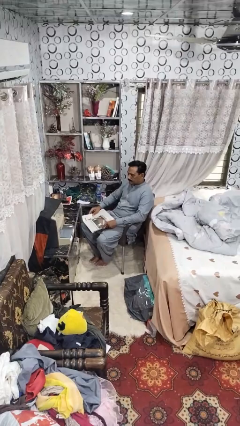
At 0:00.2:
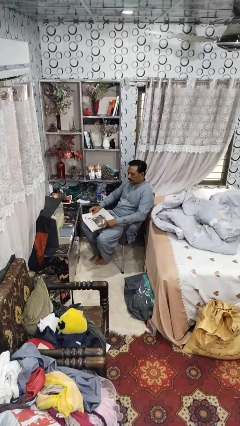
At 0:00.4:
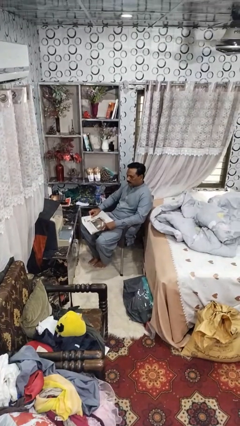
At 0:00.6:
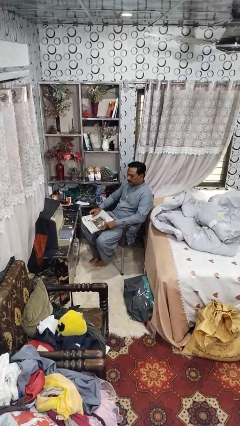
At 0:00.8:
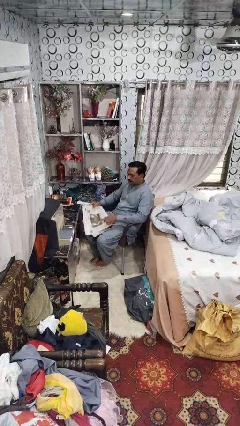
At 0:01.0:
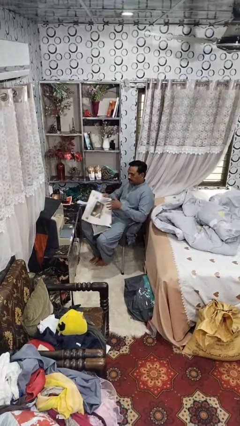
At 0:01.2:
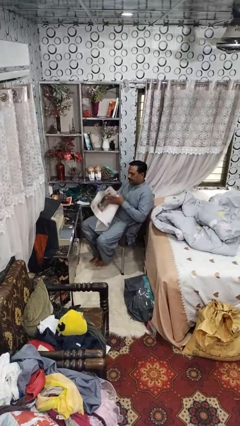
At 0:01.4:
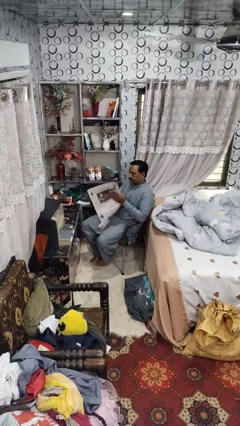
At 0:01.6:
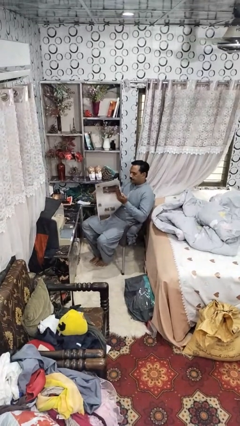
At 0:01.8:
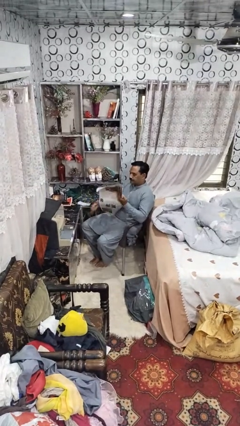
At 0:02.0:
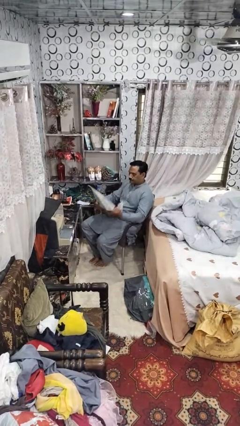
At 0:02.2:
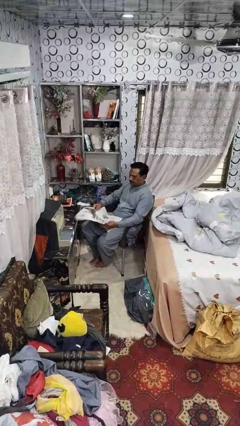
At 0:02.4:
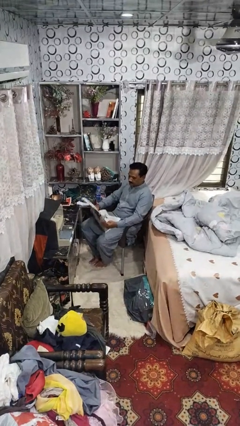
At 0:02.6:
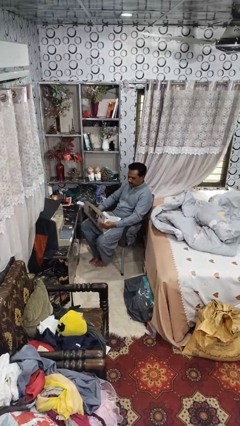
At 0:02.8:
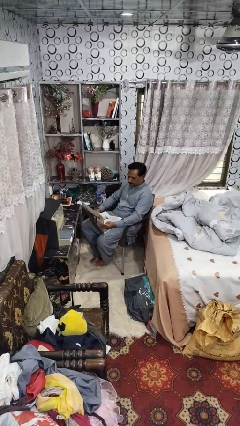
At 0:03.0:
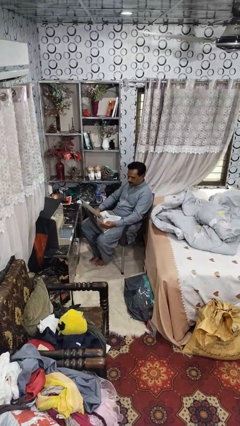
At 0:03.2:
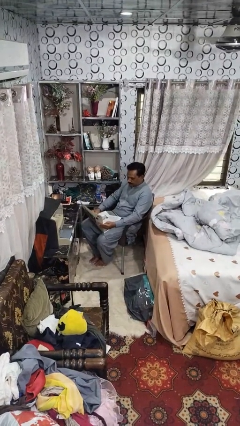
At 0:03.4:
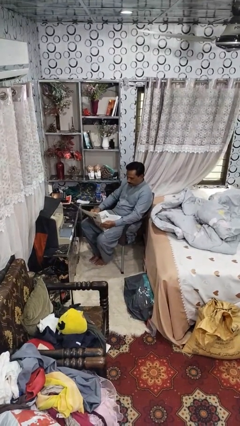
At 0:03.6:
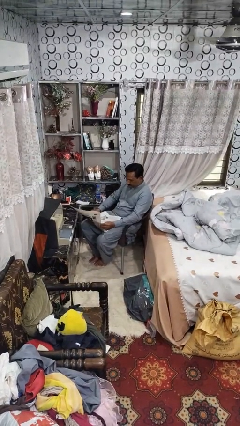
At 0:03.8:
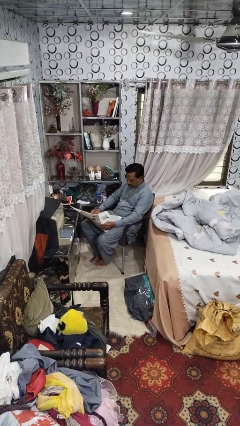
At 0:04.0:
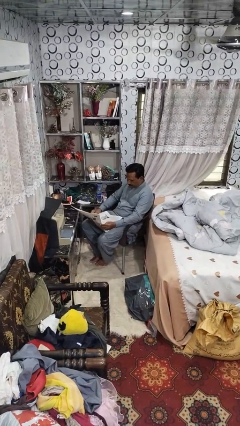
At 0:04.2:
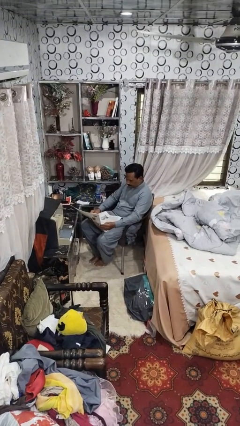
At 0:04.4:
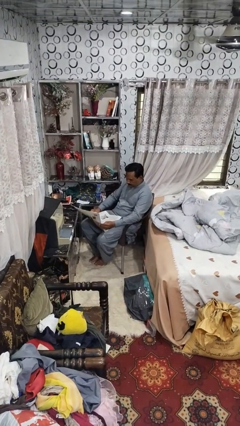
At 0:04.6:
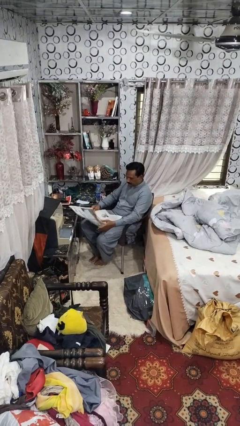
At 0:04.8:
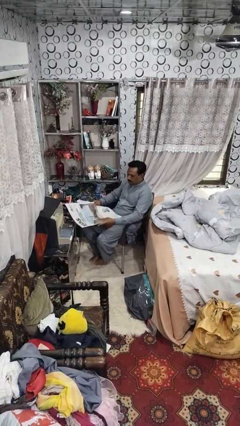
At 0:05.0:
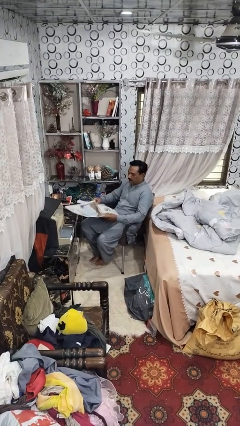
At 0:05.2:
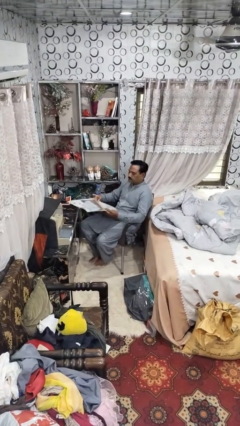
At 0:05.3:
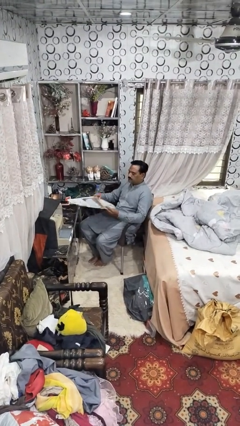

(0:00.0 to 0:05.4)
person reads newspaper

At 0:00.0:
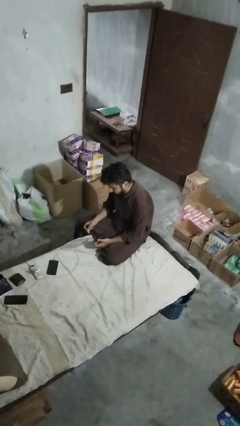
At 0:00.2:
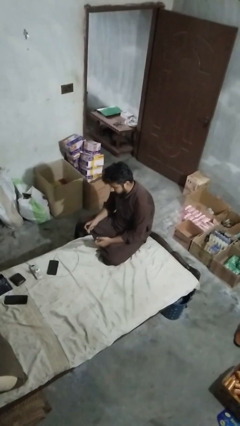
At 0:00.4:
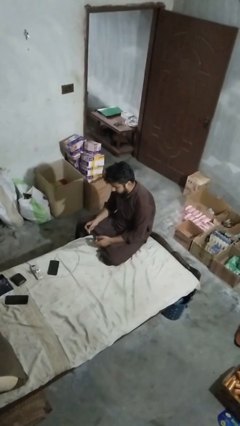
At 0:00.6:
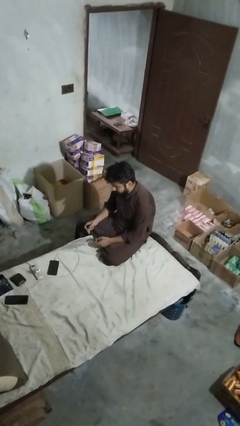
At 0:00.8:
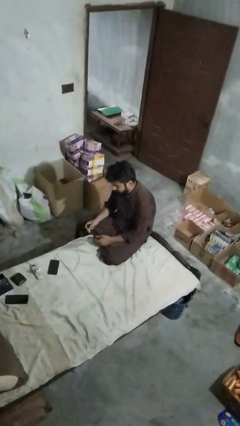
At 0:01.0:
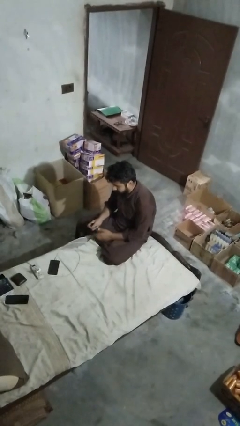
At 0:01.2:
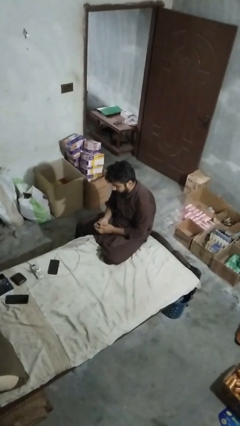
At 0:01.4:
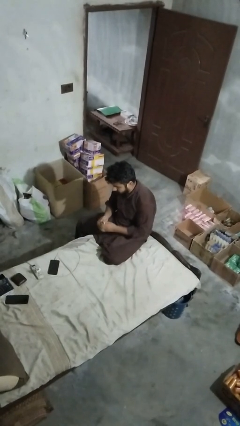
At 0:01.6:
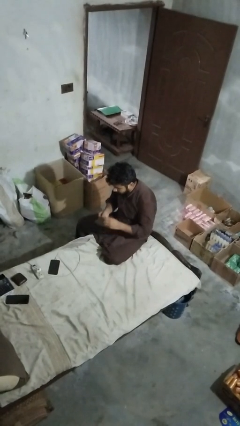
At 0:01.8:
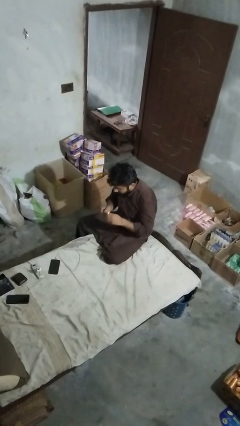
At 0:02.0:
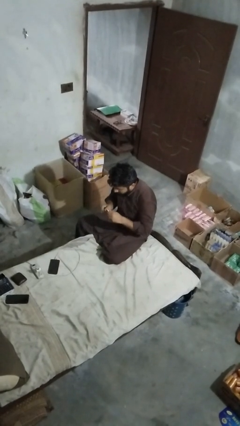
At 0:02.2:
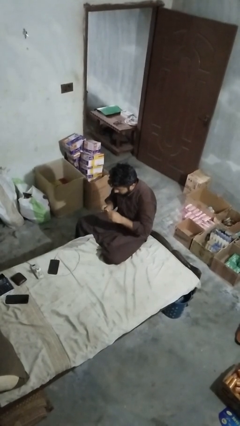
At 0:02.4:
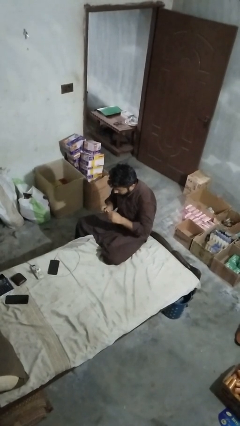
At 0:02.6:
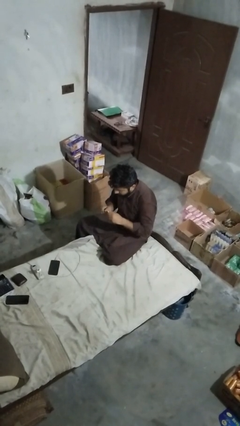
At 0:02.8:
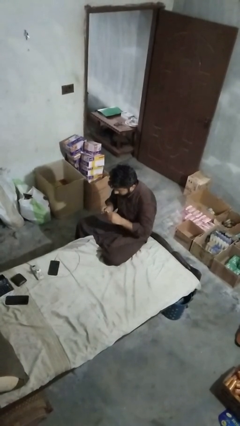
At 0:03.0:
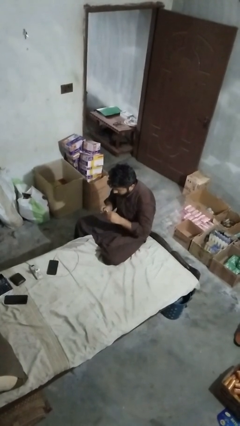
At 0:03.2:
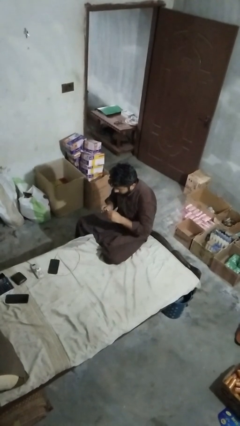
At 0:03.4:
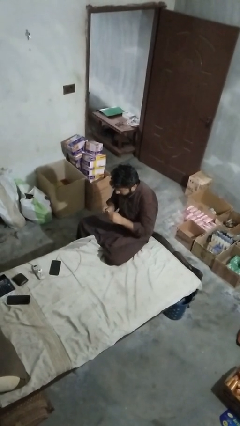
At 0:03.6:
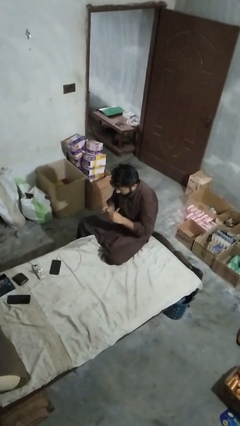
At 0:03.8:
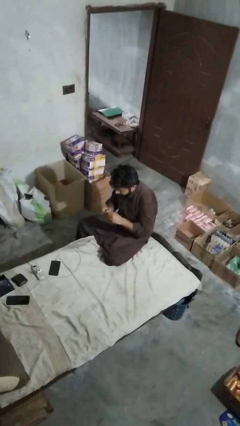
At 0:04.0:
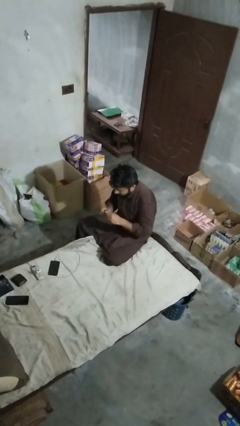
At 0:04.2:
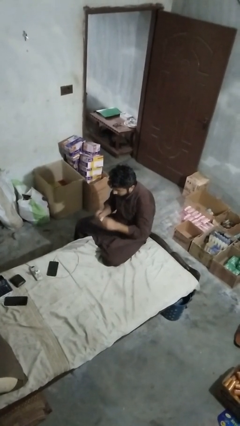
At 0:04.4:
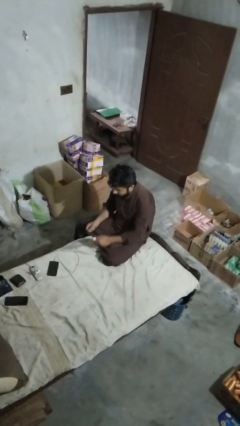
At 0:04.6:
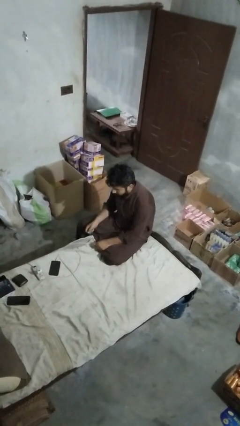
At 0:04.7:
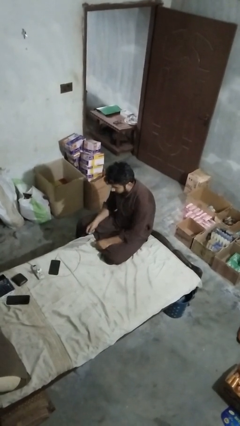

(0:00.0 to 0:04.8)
person paints fingernails

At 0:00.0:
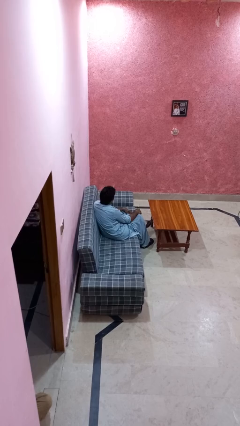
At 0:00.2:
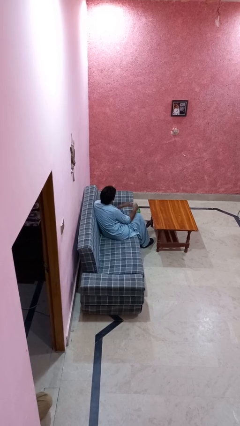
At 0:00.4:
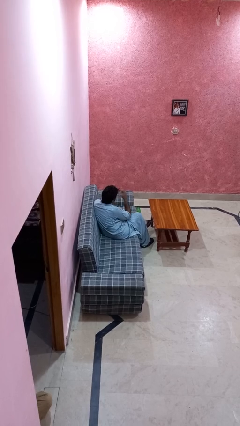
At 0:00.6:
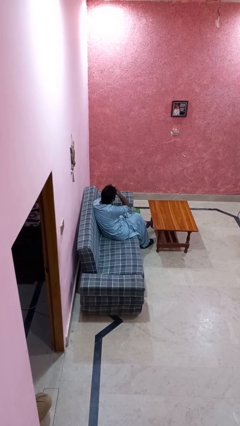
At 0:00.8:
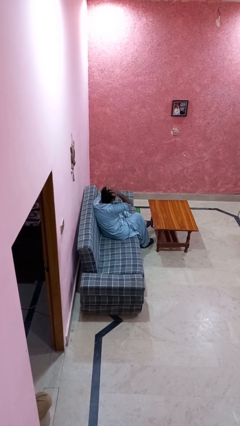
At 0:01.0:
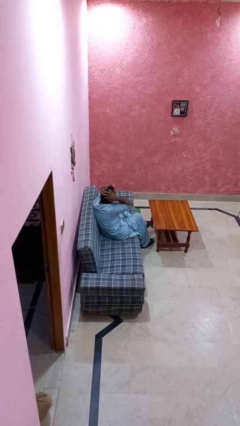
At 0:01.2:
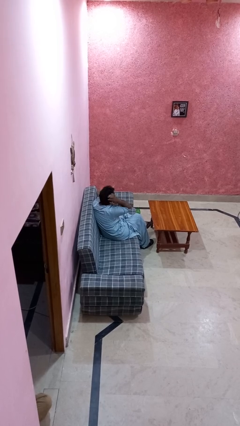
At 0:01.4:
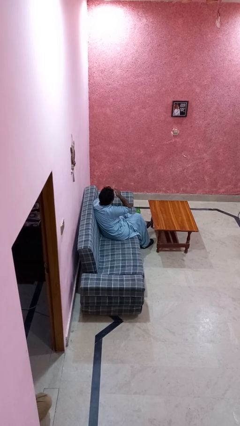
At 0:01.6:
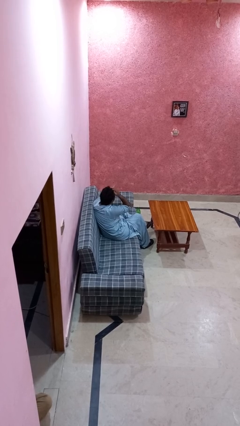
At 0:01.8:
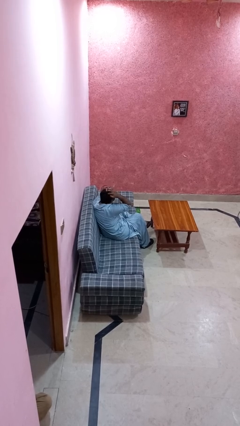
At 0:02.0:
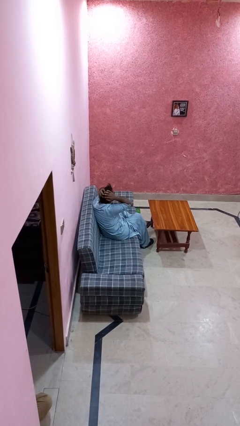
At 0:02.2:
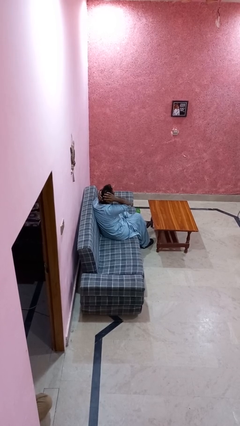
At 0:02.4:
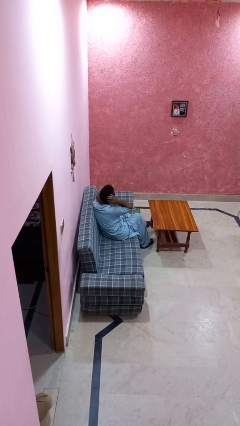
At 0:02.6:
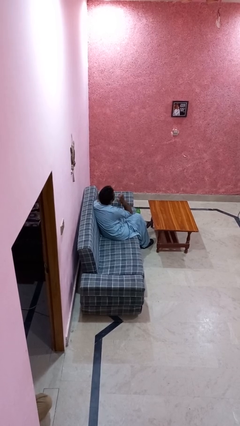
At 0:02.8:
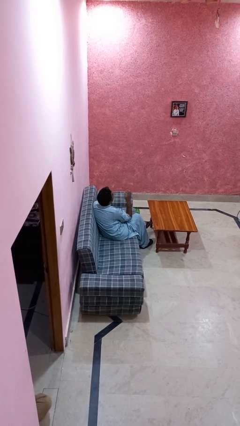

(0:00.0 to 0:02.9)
person strokes hair

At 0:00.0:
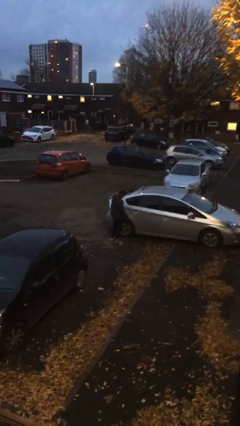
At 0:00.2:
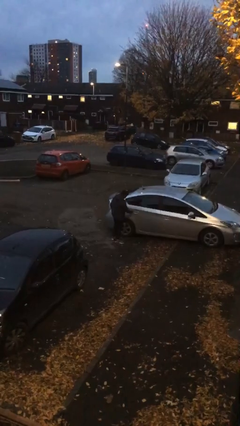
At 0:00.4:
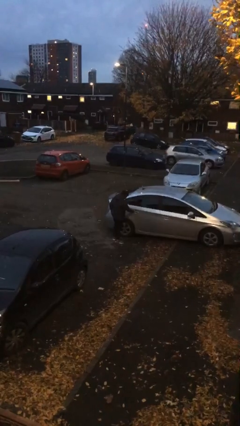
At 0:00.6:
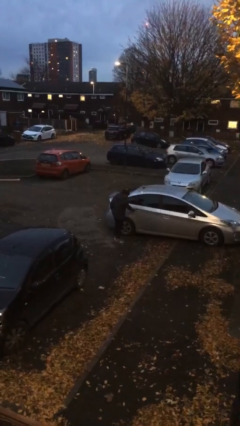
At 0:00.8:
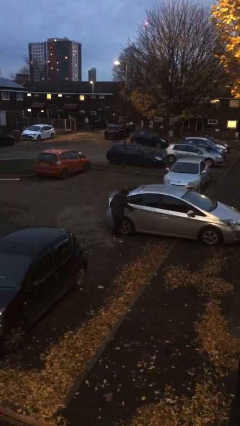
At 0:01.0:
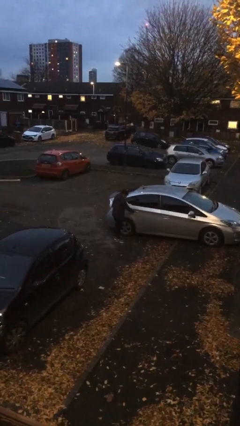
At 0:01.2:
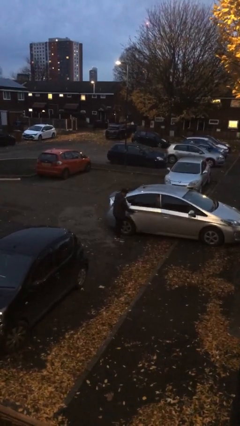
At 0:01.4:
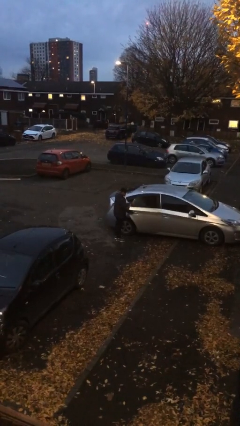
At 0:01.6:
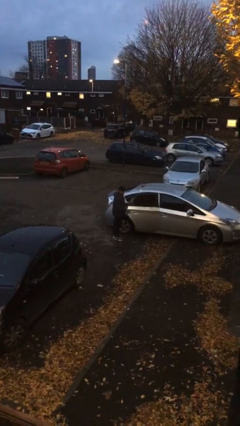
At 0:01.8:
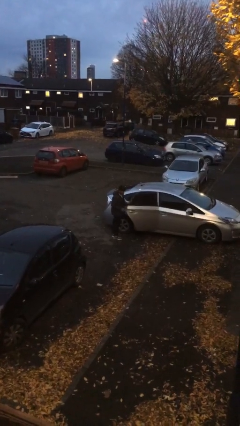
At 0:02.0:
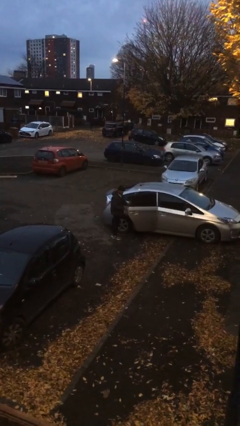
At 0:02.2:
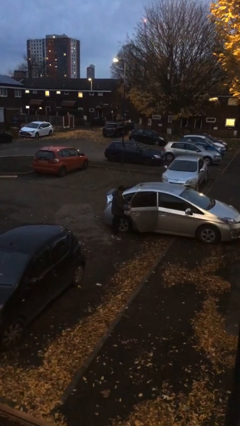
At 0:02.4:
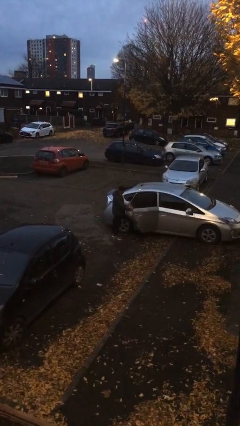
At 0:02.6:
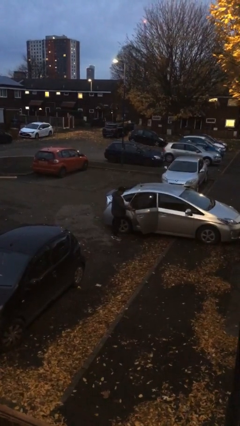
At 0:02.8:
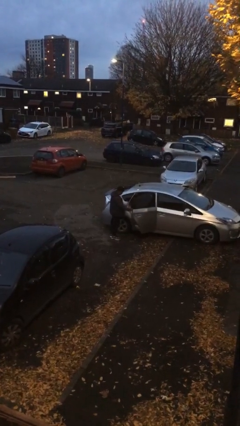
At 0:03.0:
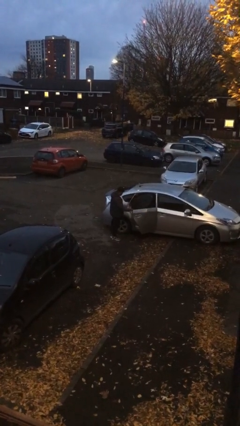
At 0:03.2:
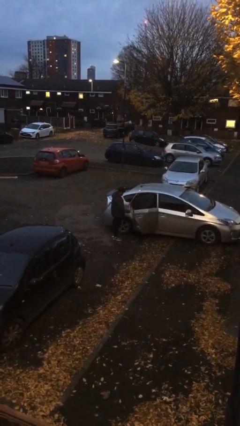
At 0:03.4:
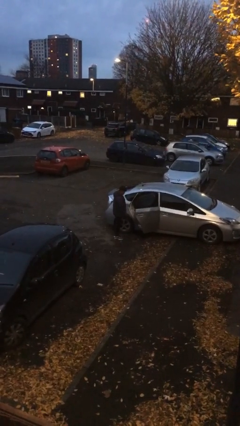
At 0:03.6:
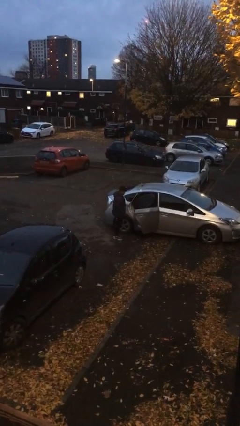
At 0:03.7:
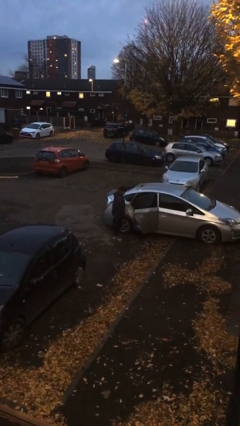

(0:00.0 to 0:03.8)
person opens car door

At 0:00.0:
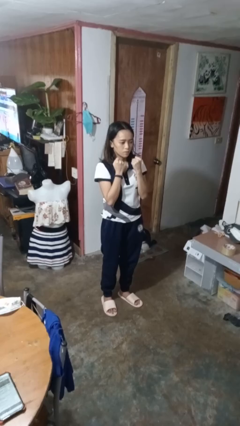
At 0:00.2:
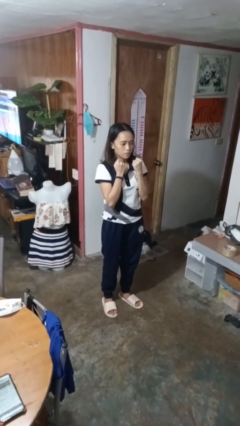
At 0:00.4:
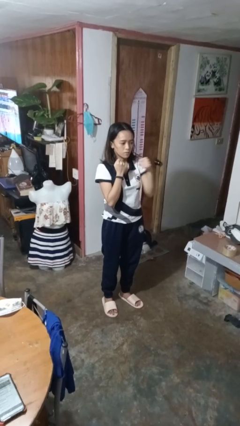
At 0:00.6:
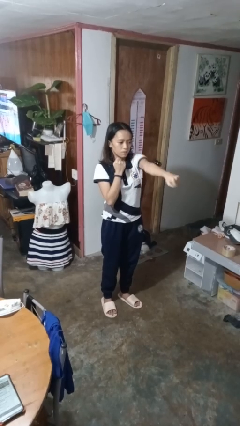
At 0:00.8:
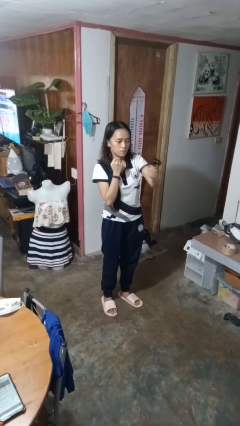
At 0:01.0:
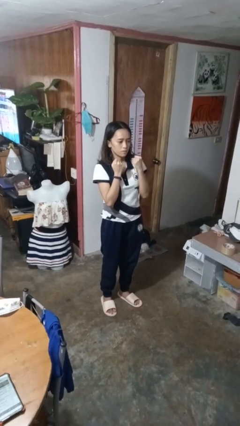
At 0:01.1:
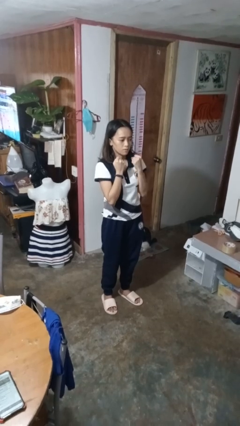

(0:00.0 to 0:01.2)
person punches

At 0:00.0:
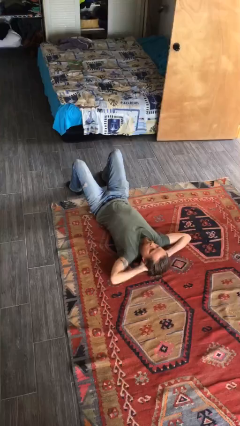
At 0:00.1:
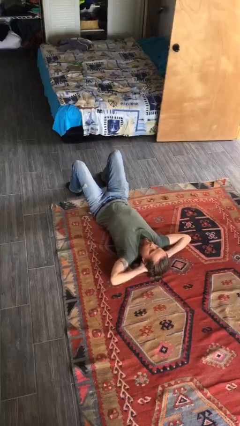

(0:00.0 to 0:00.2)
person exercises with situp
